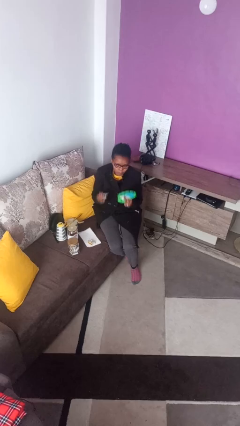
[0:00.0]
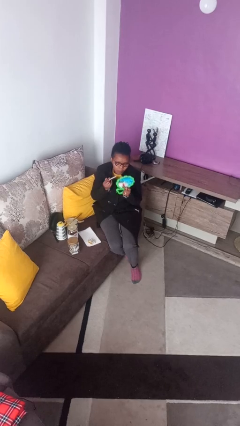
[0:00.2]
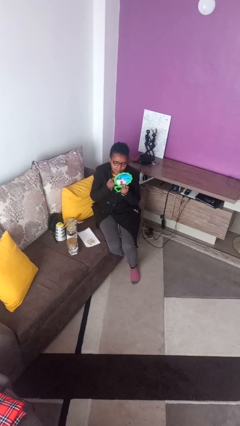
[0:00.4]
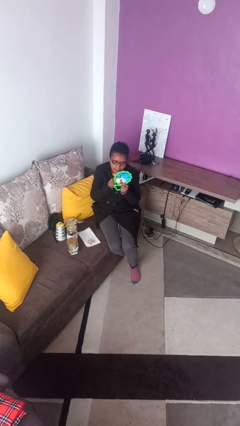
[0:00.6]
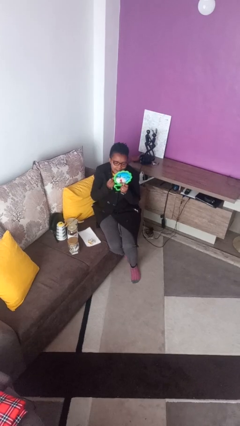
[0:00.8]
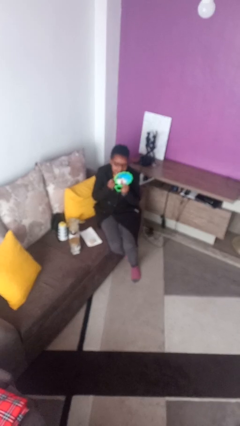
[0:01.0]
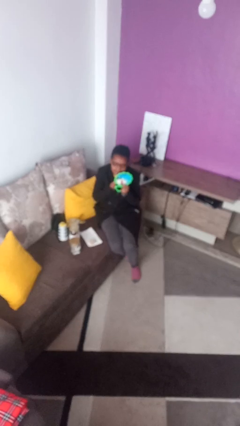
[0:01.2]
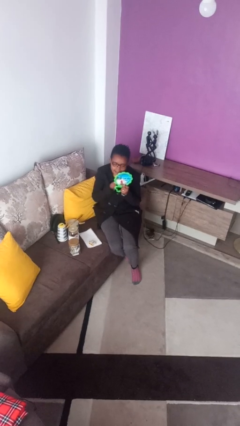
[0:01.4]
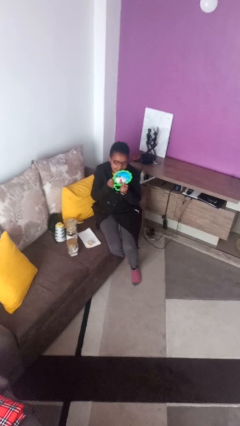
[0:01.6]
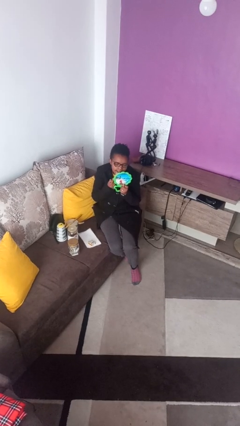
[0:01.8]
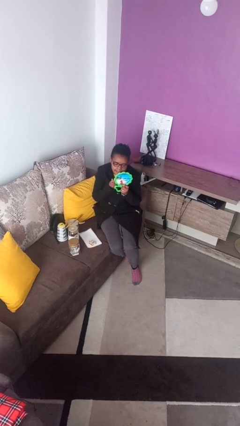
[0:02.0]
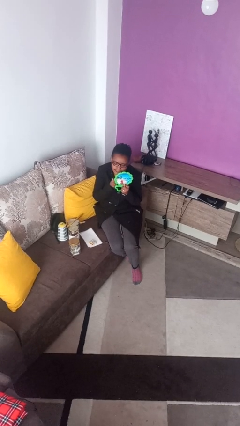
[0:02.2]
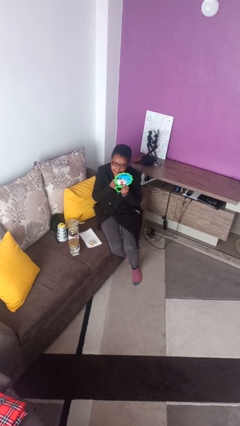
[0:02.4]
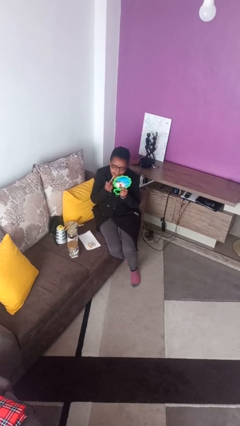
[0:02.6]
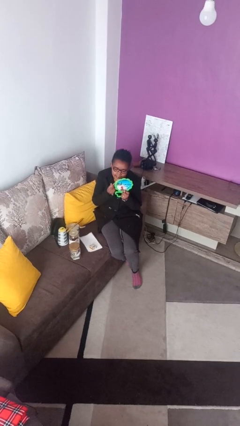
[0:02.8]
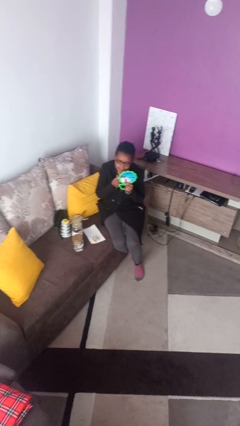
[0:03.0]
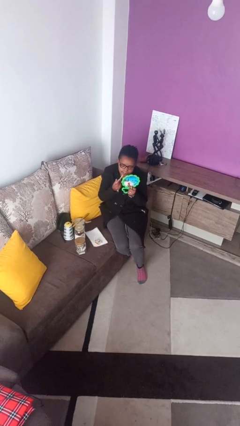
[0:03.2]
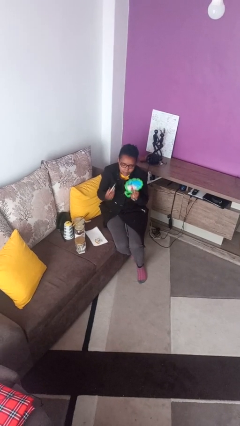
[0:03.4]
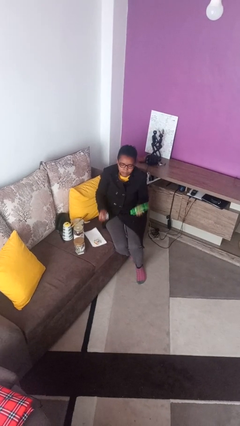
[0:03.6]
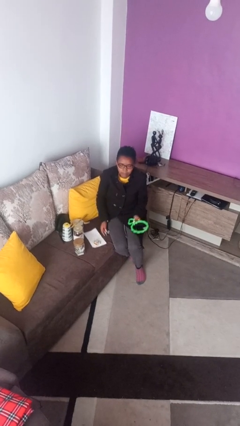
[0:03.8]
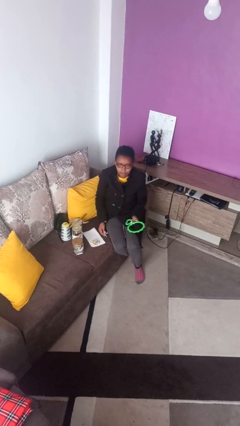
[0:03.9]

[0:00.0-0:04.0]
person applies lip makeup

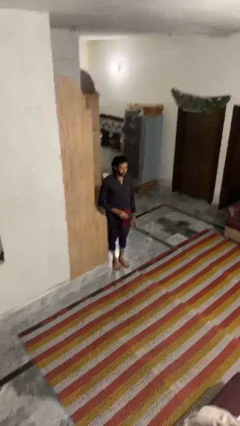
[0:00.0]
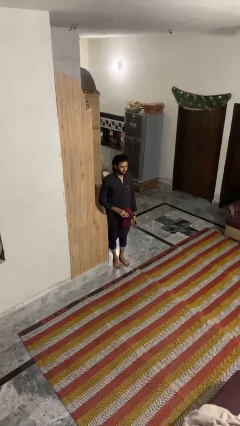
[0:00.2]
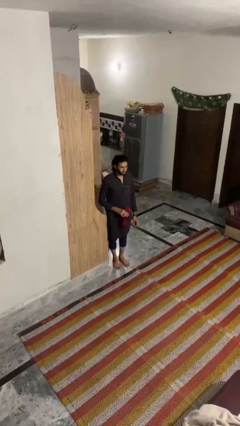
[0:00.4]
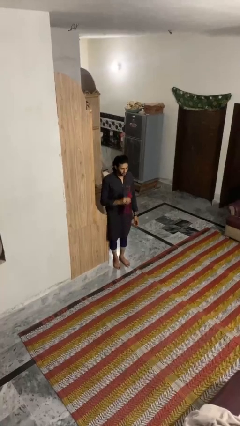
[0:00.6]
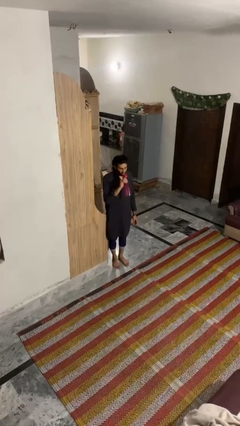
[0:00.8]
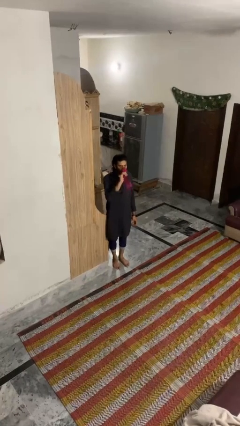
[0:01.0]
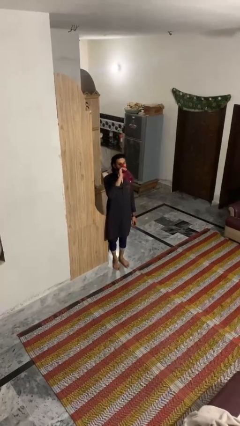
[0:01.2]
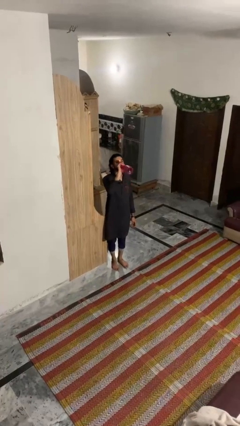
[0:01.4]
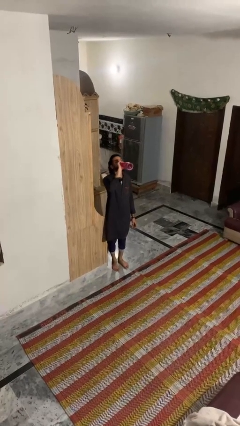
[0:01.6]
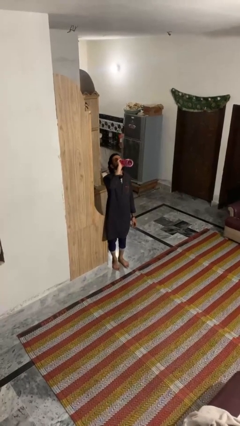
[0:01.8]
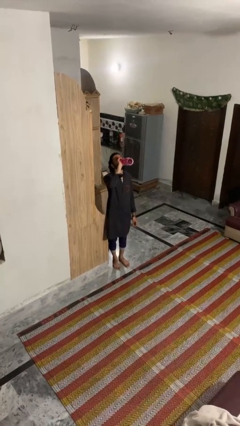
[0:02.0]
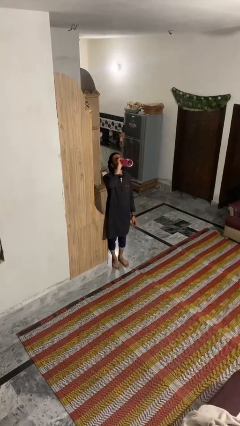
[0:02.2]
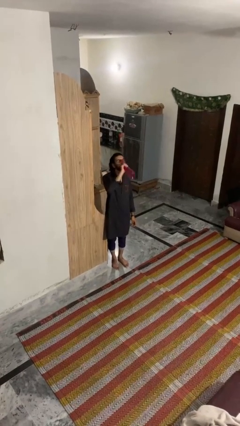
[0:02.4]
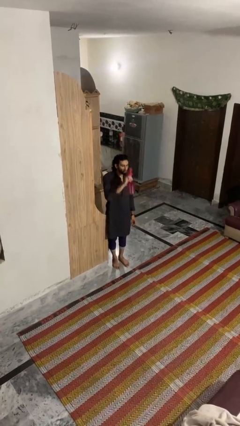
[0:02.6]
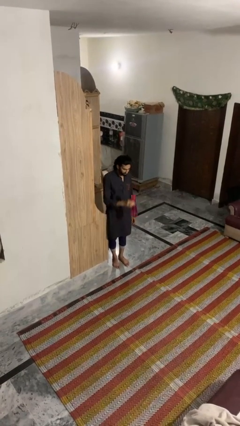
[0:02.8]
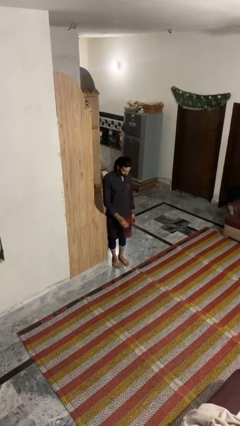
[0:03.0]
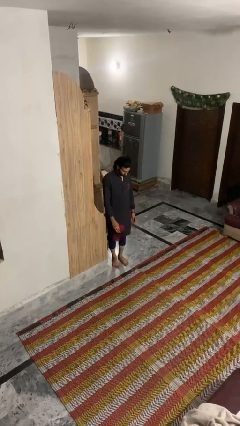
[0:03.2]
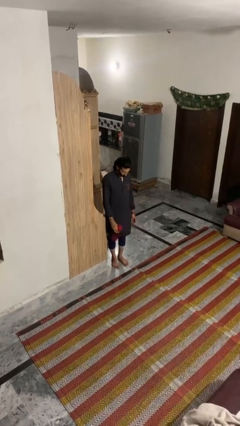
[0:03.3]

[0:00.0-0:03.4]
person drinks from bottle

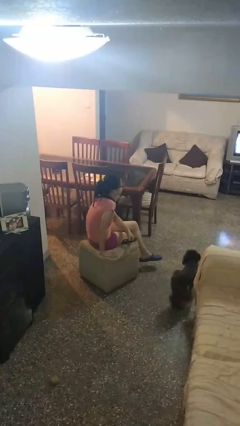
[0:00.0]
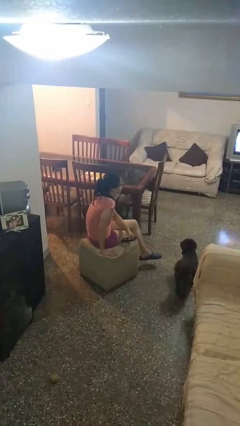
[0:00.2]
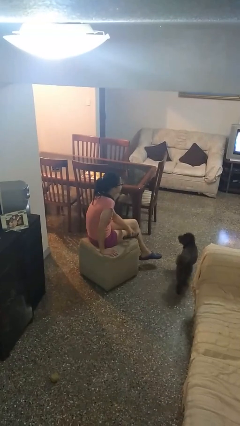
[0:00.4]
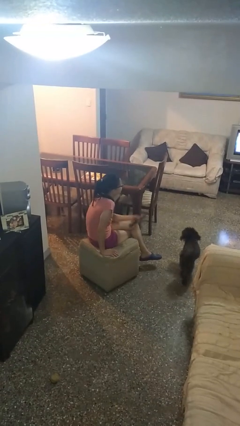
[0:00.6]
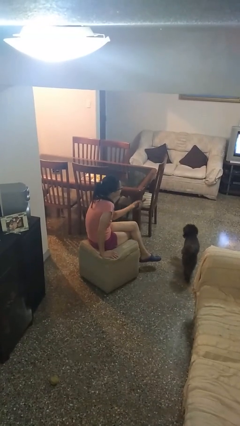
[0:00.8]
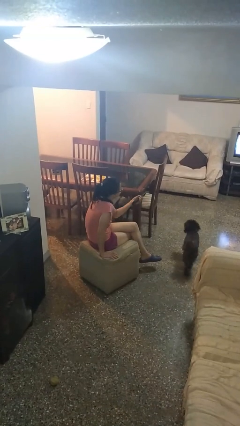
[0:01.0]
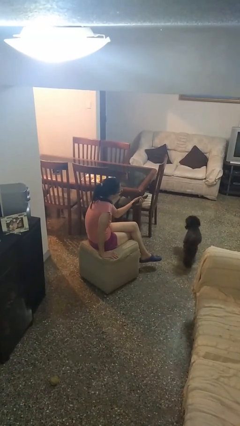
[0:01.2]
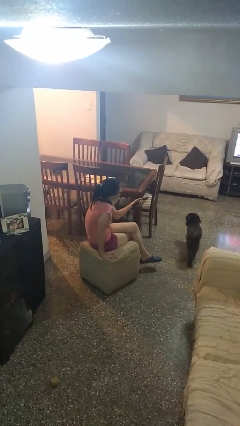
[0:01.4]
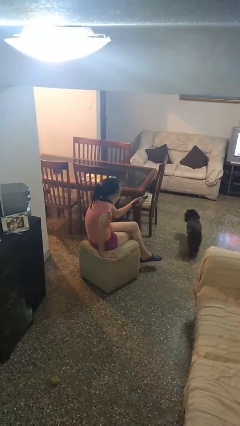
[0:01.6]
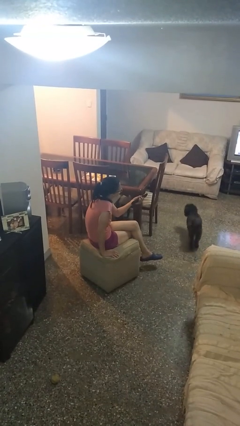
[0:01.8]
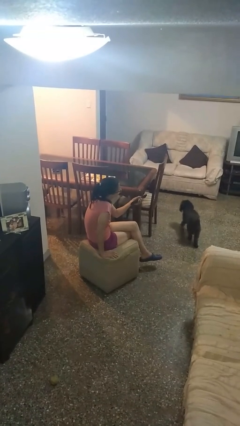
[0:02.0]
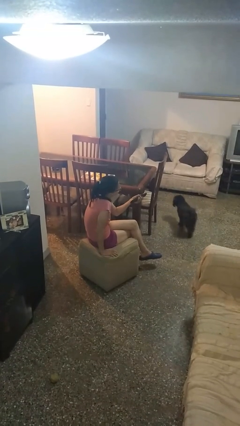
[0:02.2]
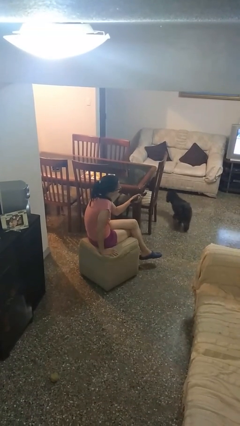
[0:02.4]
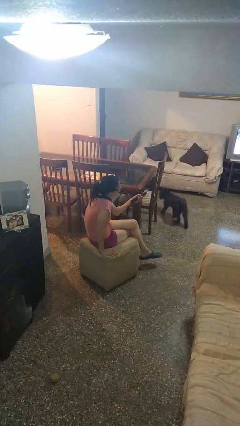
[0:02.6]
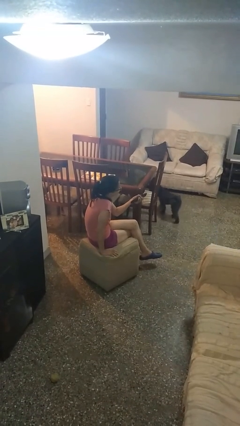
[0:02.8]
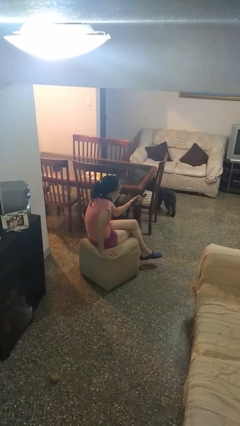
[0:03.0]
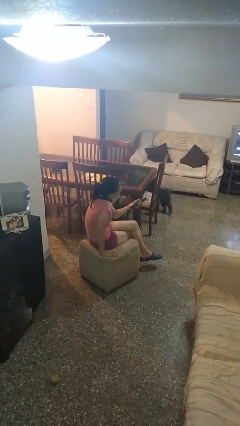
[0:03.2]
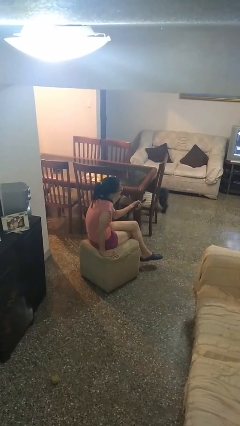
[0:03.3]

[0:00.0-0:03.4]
person uses television remote

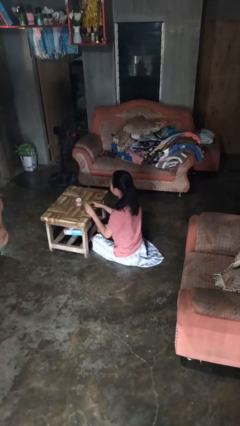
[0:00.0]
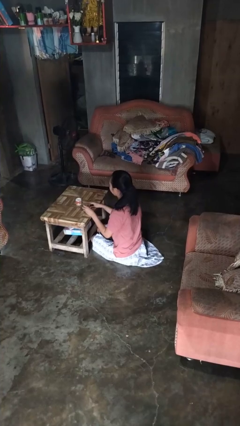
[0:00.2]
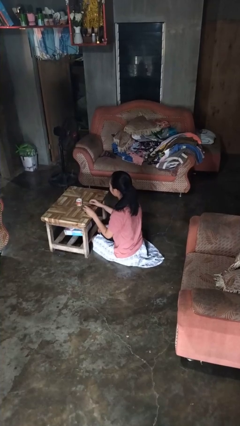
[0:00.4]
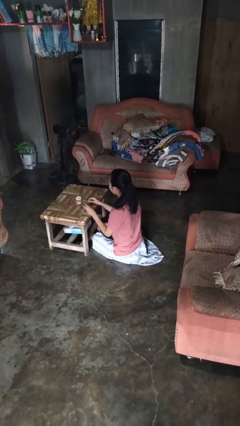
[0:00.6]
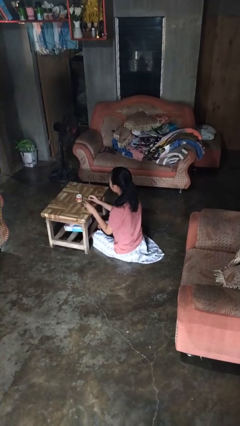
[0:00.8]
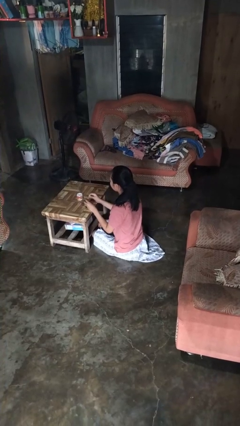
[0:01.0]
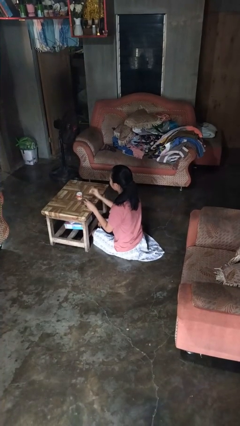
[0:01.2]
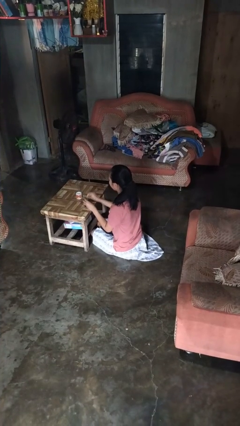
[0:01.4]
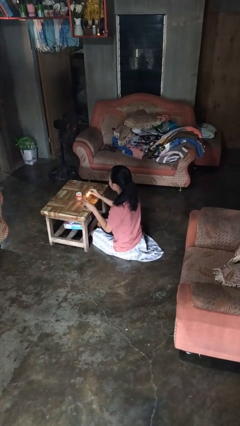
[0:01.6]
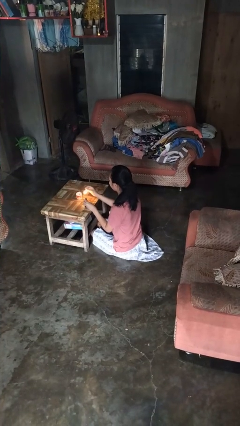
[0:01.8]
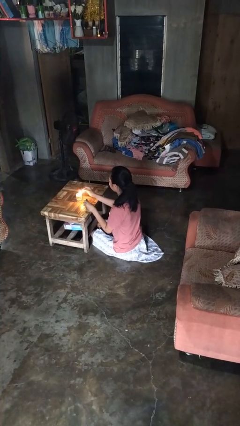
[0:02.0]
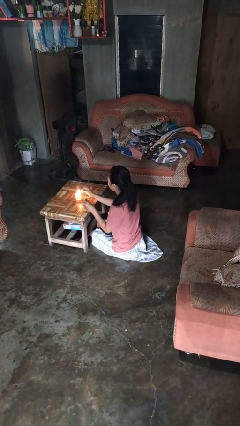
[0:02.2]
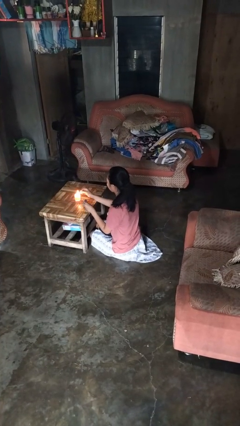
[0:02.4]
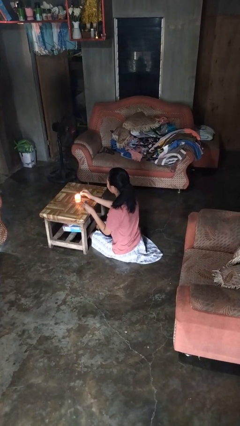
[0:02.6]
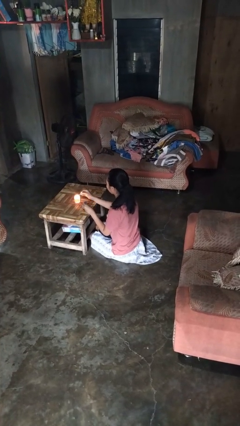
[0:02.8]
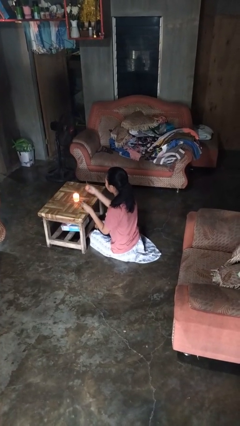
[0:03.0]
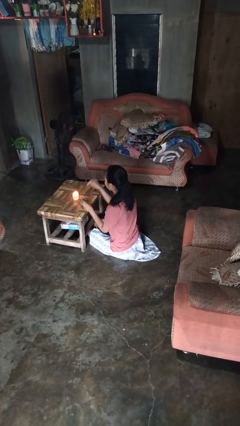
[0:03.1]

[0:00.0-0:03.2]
person lights candle

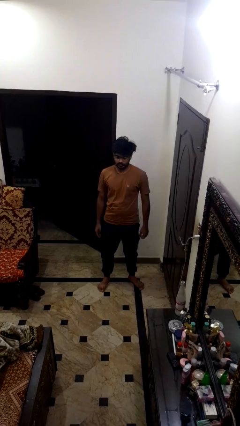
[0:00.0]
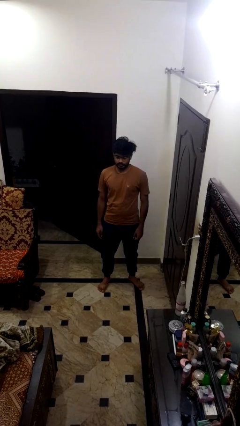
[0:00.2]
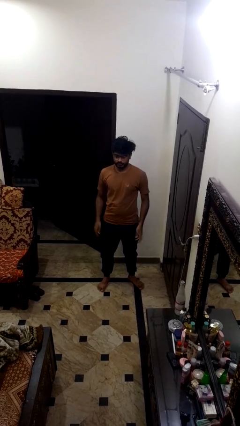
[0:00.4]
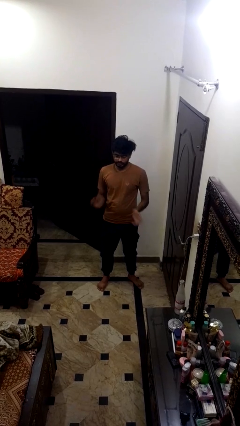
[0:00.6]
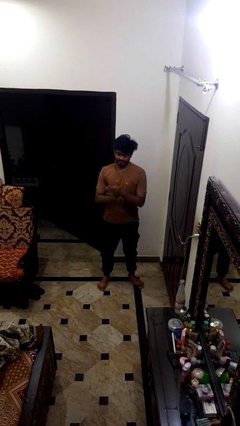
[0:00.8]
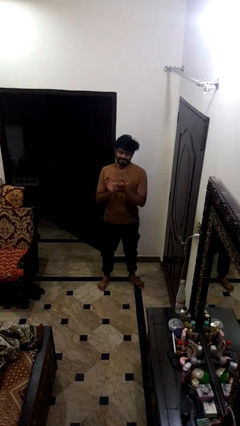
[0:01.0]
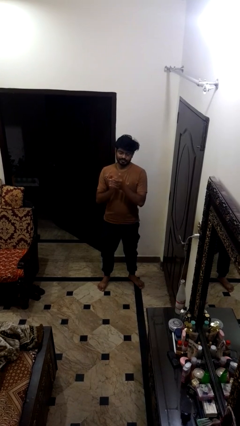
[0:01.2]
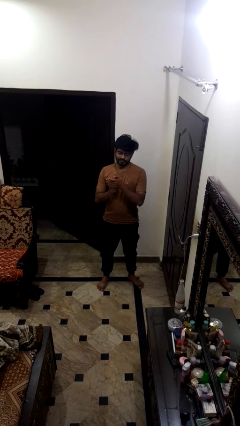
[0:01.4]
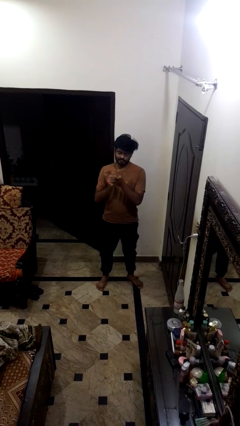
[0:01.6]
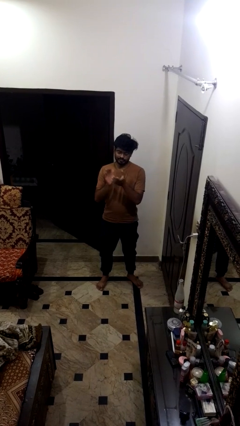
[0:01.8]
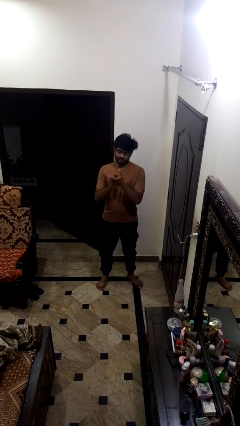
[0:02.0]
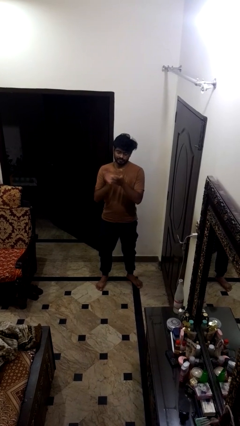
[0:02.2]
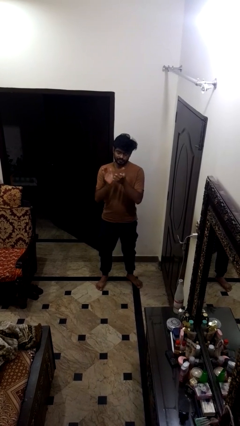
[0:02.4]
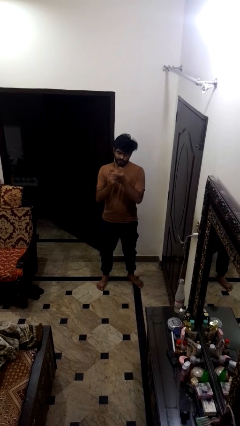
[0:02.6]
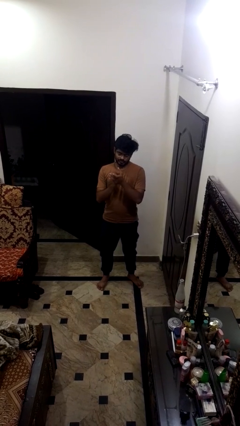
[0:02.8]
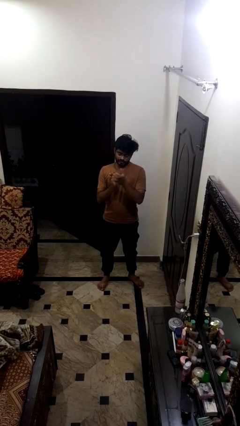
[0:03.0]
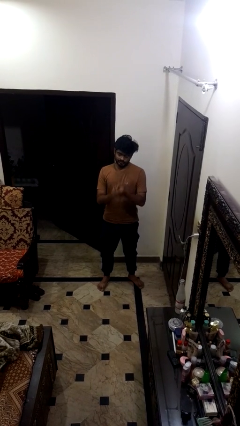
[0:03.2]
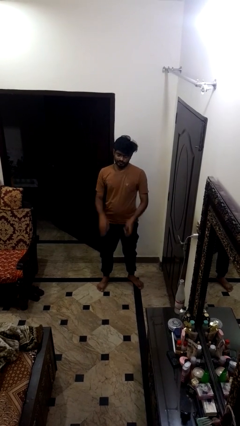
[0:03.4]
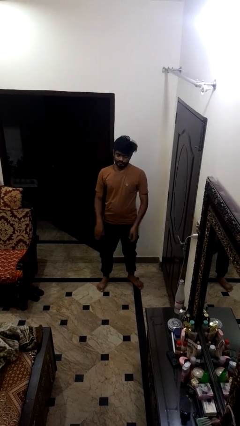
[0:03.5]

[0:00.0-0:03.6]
person claps hands
